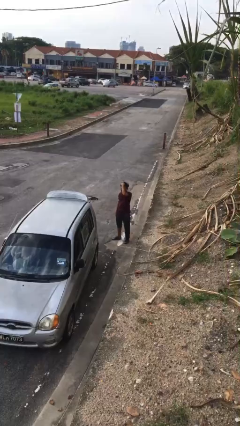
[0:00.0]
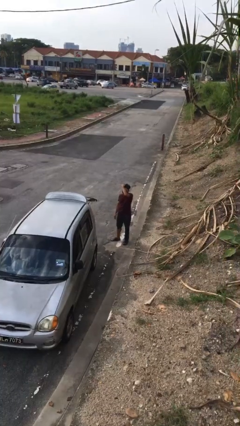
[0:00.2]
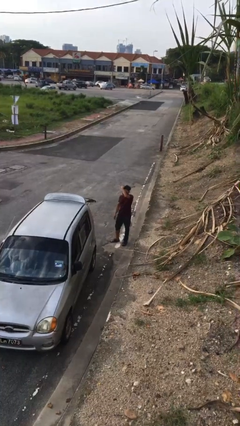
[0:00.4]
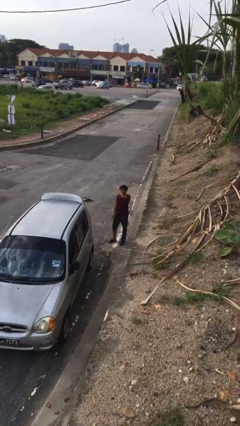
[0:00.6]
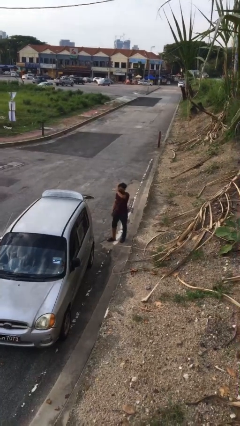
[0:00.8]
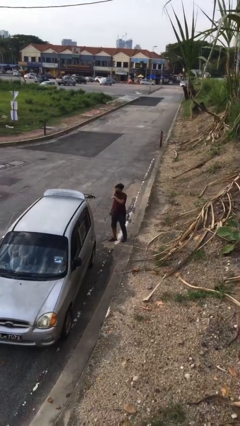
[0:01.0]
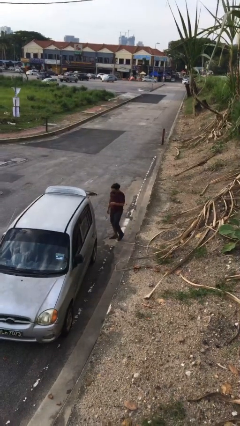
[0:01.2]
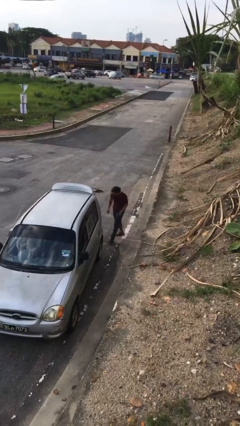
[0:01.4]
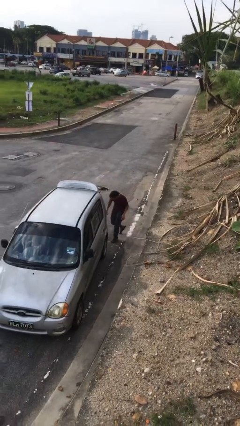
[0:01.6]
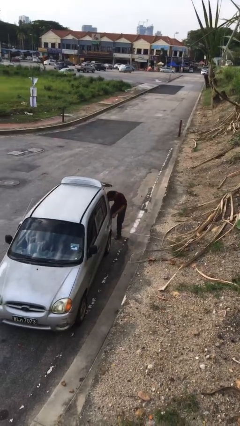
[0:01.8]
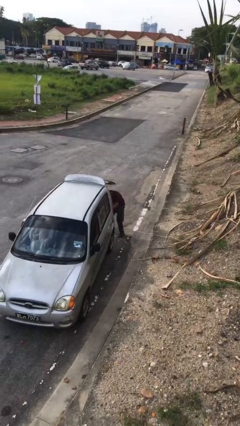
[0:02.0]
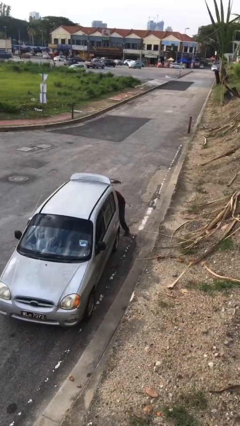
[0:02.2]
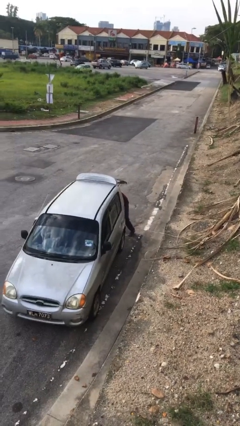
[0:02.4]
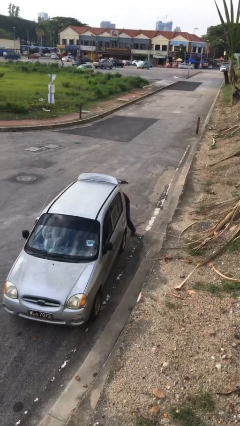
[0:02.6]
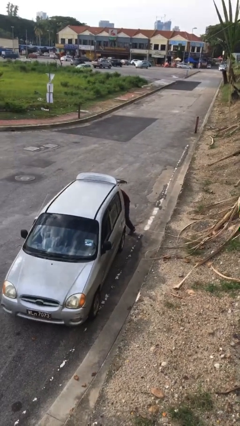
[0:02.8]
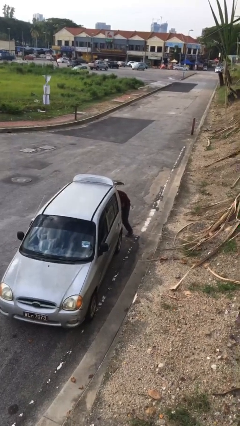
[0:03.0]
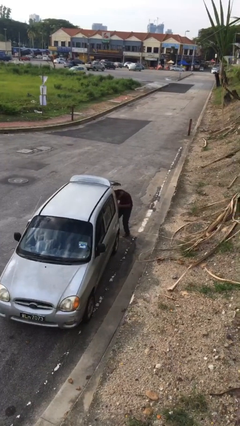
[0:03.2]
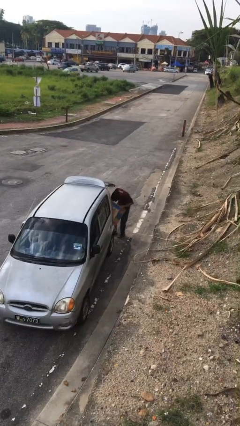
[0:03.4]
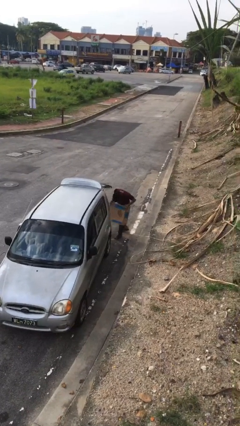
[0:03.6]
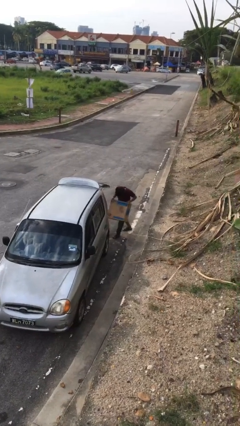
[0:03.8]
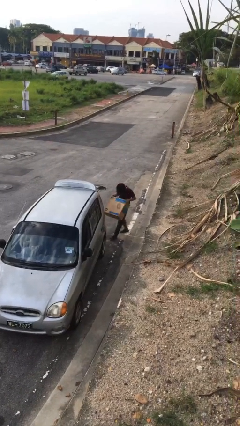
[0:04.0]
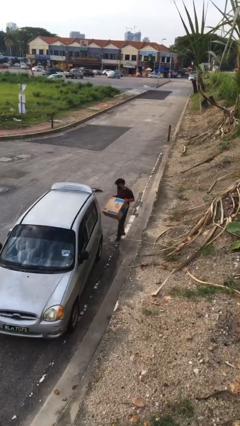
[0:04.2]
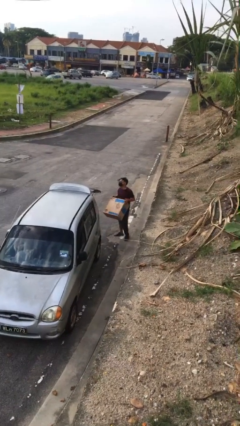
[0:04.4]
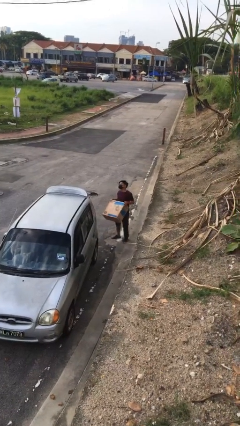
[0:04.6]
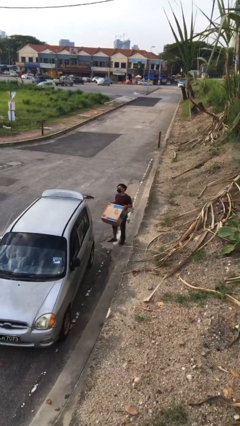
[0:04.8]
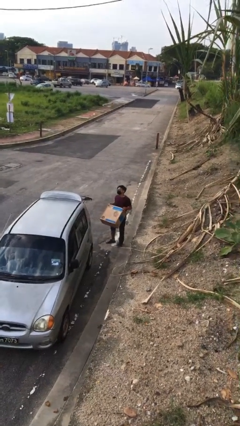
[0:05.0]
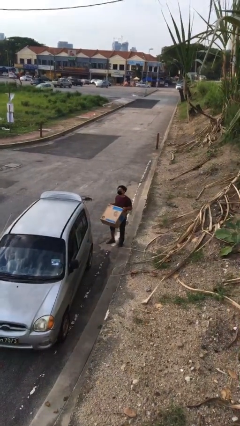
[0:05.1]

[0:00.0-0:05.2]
person unloads car

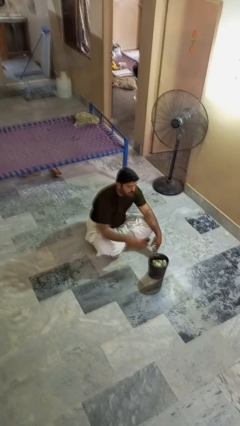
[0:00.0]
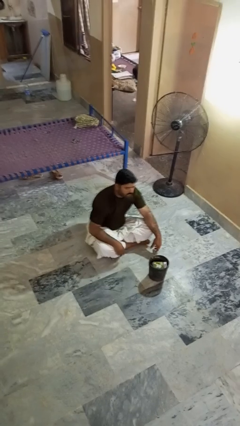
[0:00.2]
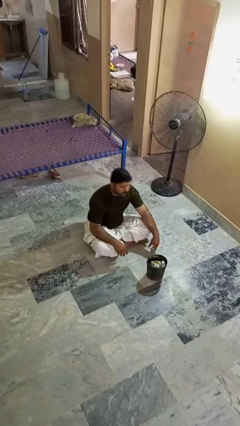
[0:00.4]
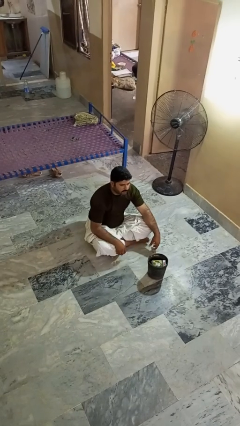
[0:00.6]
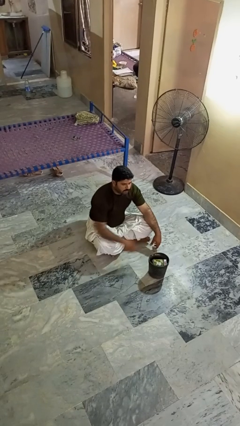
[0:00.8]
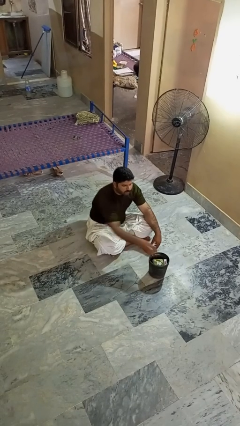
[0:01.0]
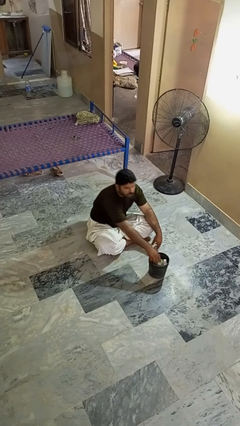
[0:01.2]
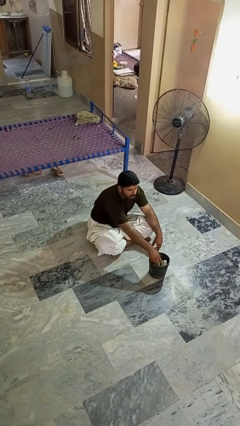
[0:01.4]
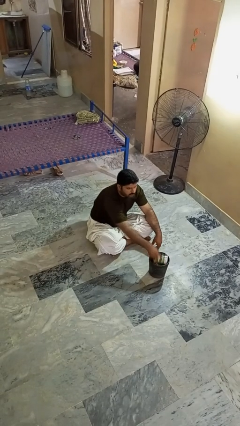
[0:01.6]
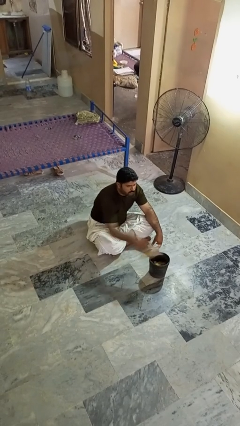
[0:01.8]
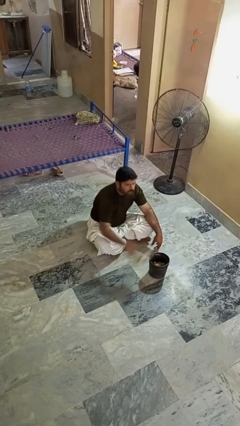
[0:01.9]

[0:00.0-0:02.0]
person takes object from basket

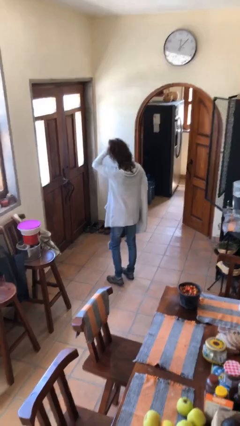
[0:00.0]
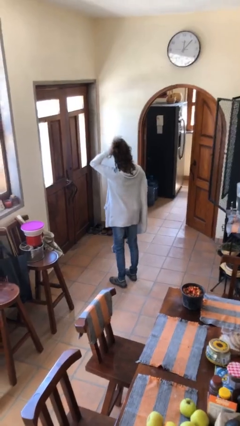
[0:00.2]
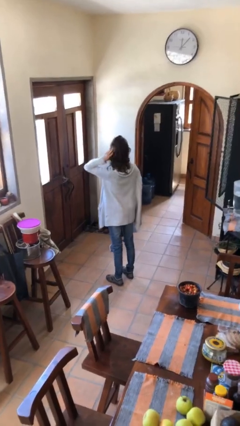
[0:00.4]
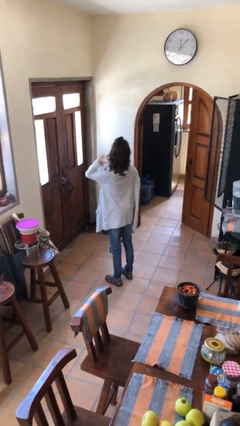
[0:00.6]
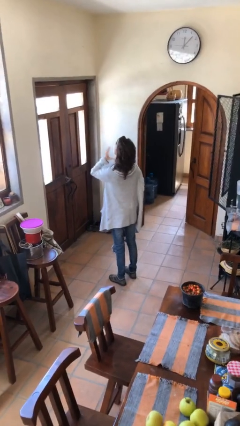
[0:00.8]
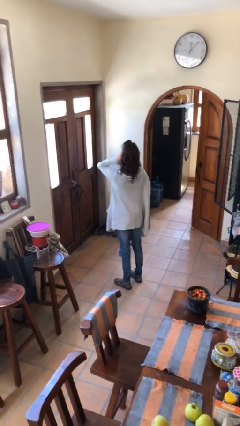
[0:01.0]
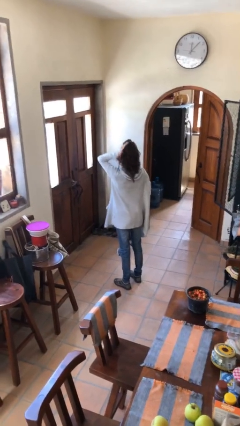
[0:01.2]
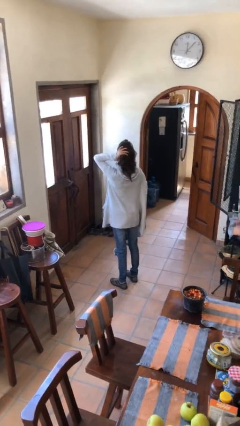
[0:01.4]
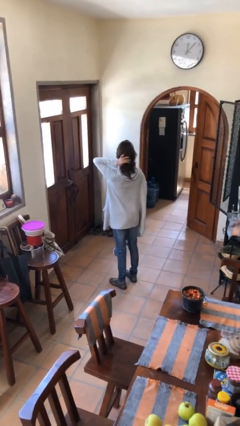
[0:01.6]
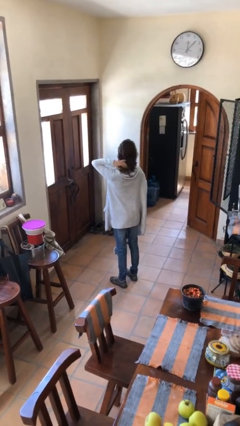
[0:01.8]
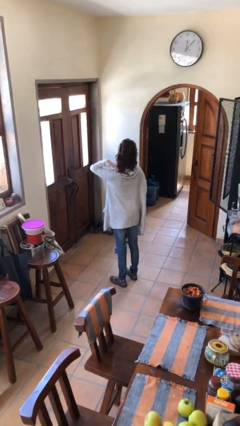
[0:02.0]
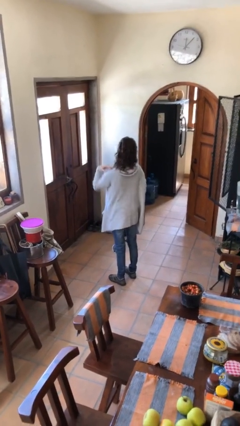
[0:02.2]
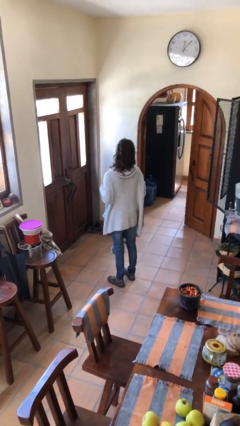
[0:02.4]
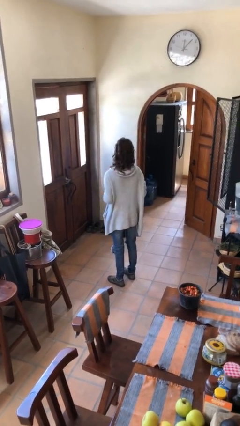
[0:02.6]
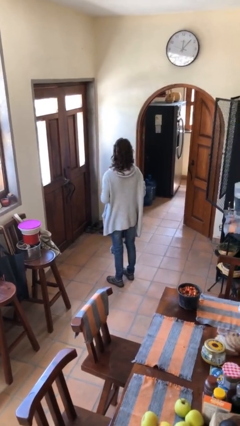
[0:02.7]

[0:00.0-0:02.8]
person strokes hair

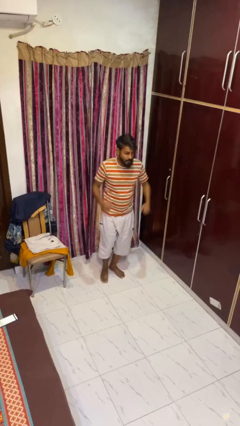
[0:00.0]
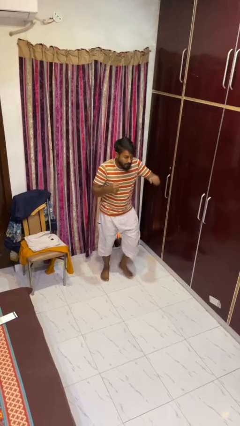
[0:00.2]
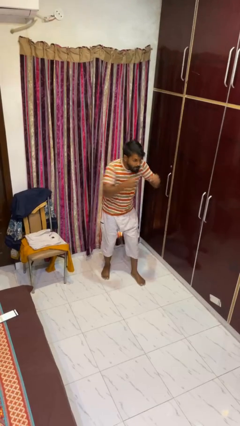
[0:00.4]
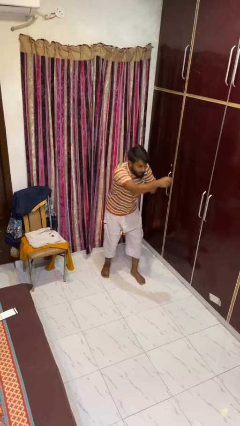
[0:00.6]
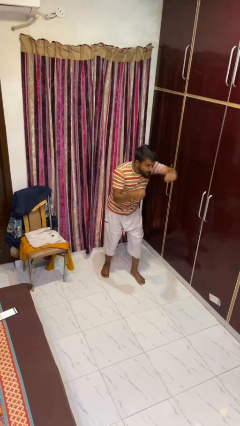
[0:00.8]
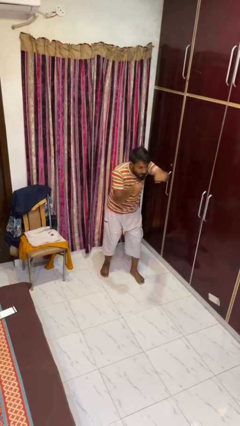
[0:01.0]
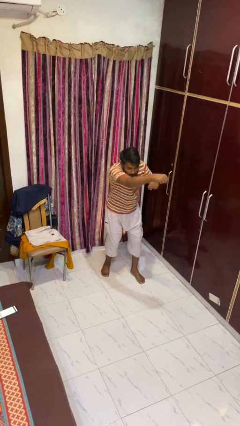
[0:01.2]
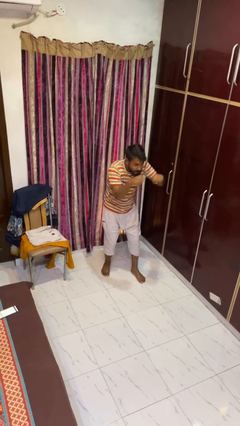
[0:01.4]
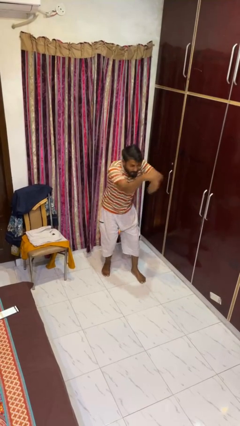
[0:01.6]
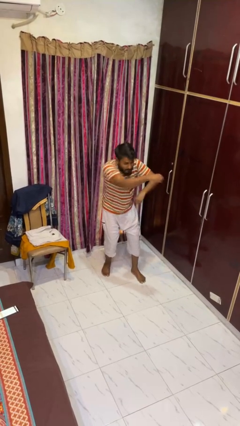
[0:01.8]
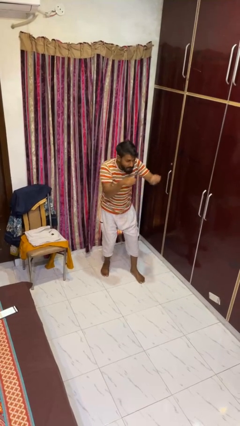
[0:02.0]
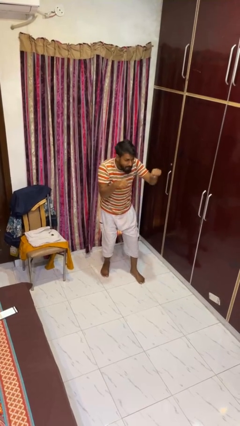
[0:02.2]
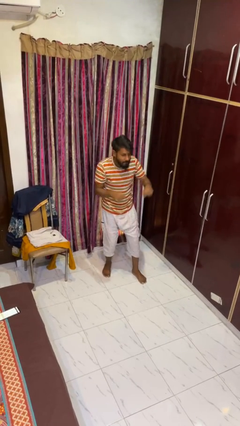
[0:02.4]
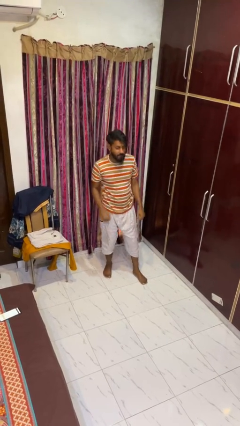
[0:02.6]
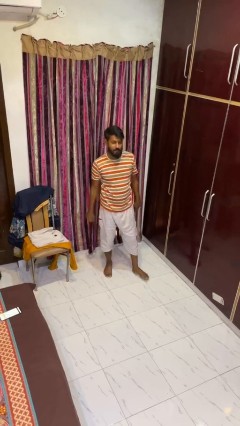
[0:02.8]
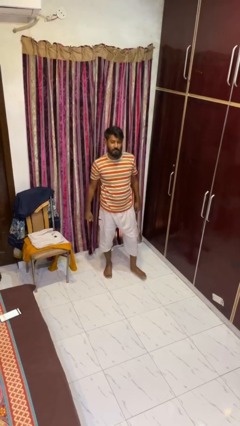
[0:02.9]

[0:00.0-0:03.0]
person punches

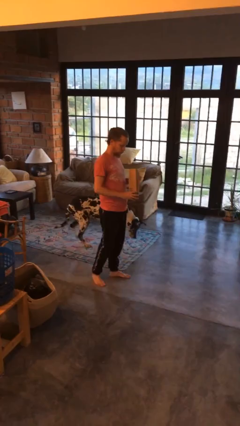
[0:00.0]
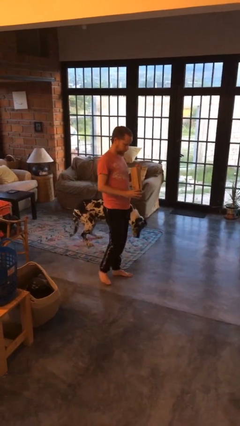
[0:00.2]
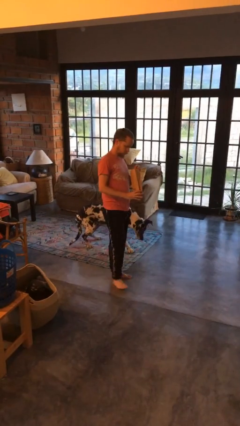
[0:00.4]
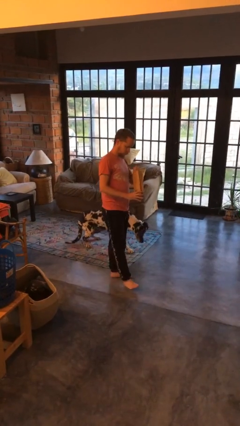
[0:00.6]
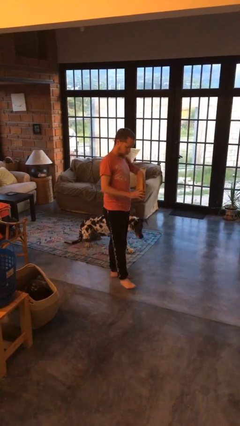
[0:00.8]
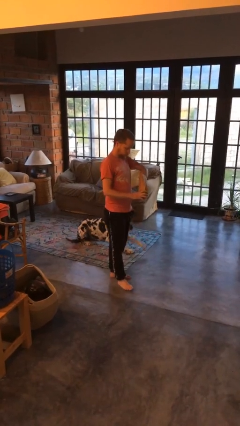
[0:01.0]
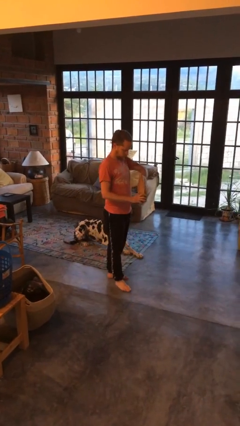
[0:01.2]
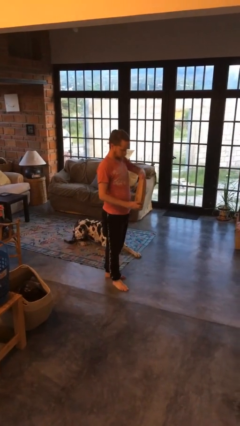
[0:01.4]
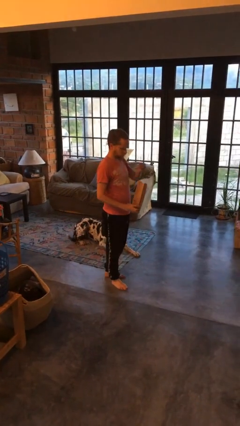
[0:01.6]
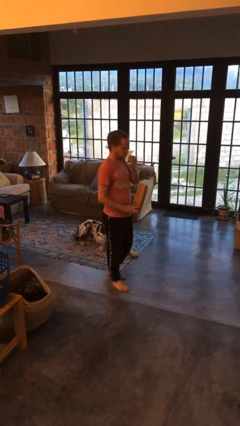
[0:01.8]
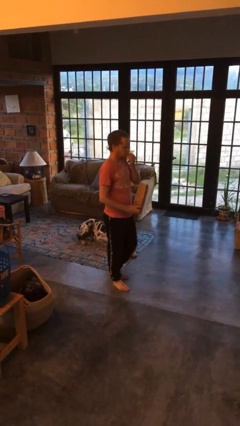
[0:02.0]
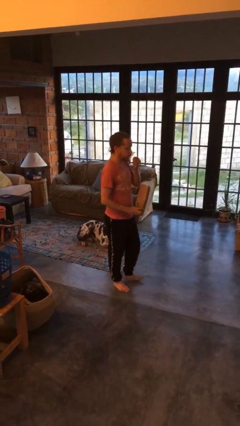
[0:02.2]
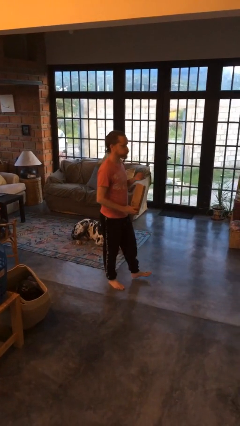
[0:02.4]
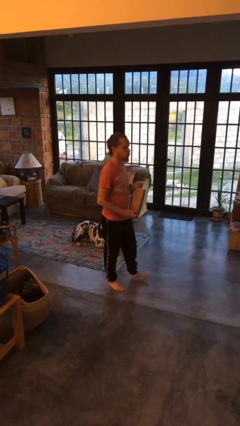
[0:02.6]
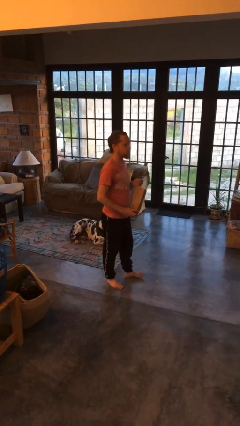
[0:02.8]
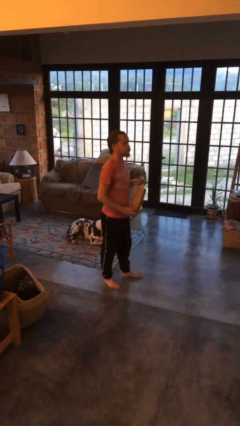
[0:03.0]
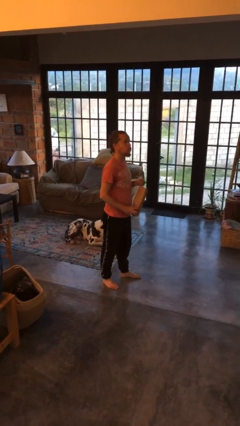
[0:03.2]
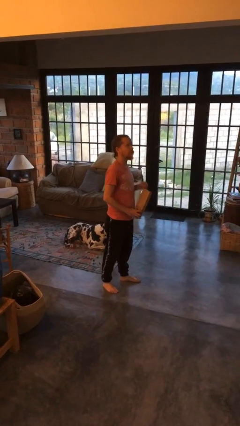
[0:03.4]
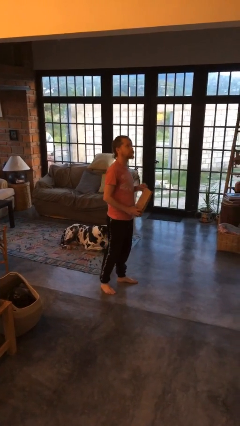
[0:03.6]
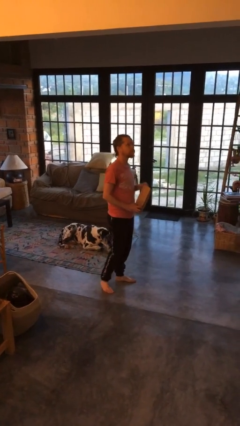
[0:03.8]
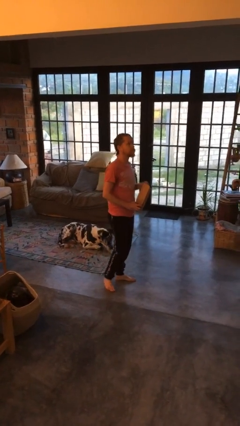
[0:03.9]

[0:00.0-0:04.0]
person eats snack from bag

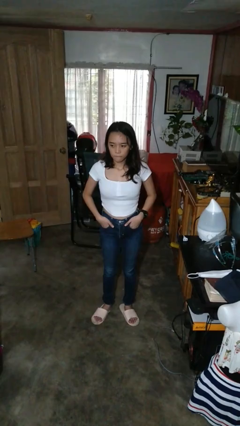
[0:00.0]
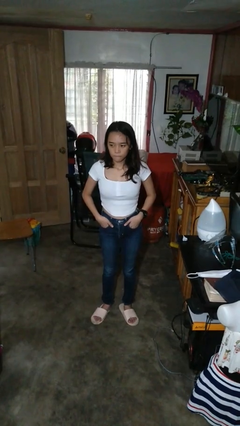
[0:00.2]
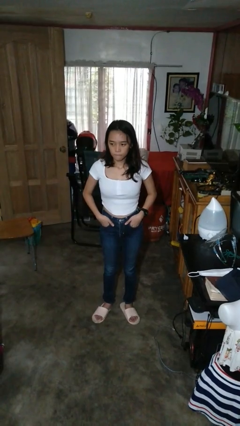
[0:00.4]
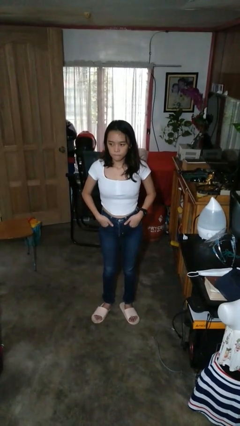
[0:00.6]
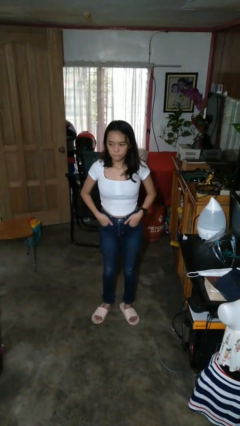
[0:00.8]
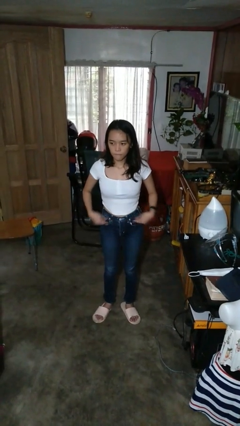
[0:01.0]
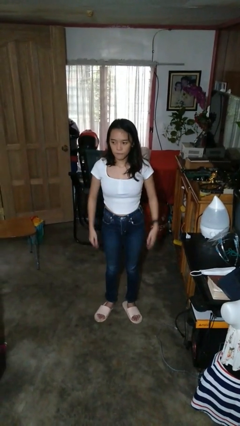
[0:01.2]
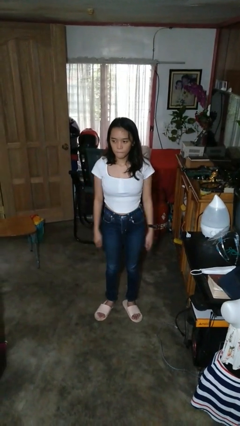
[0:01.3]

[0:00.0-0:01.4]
person puts hands in back pockets
